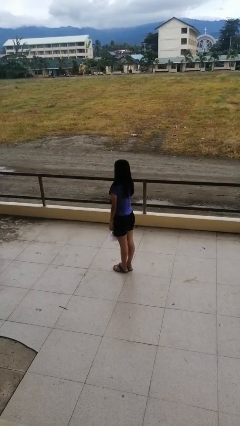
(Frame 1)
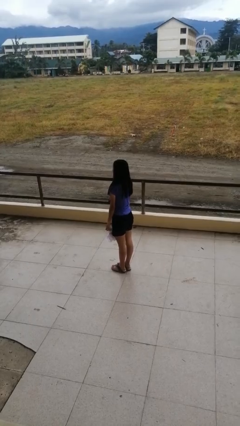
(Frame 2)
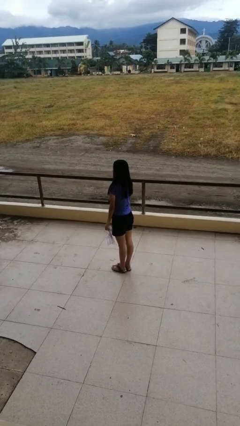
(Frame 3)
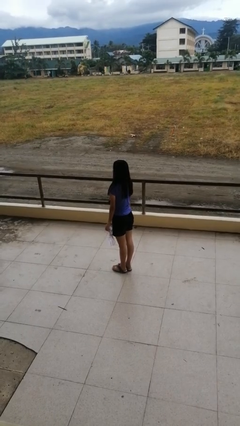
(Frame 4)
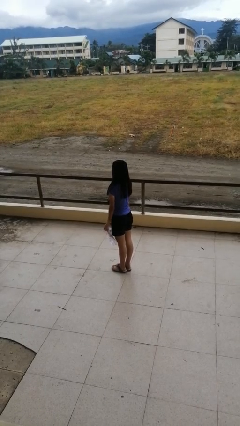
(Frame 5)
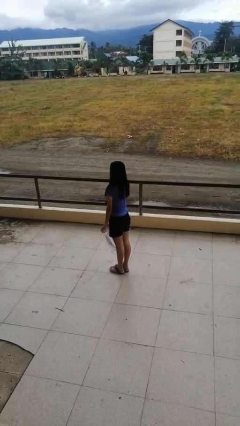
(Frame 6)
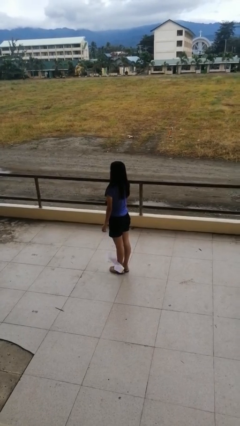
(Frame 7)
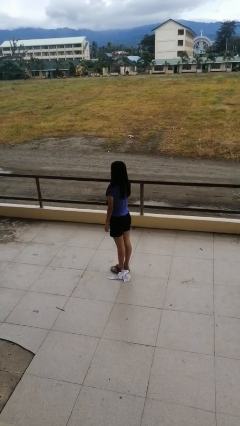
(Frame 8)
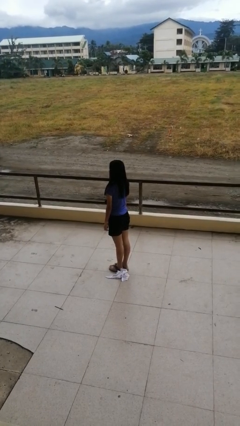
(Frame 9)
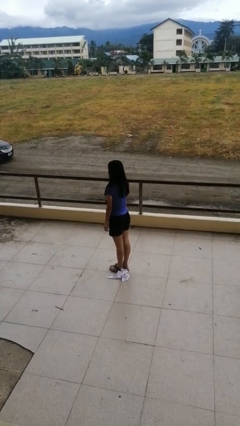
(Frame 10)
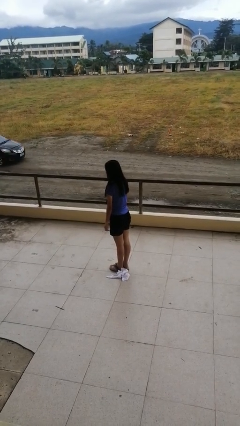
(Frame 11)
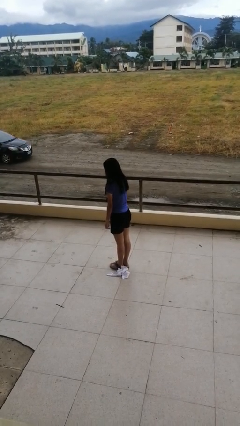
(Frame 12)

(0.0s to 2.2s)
person drops object

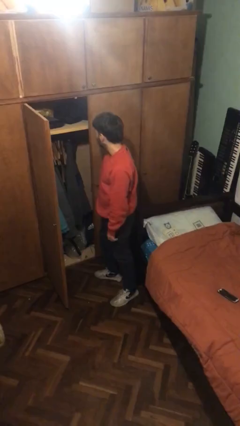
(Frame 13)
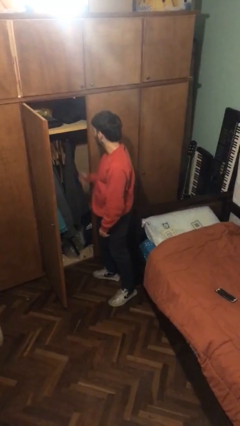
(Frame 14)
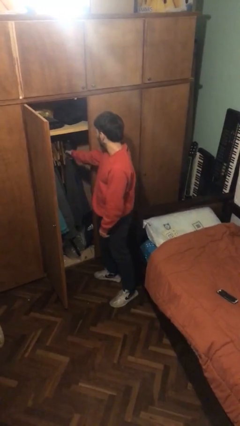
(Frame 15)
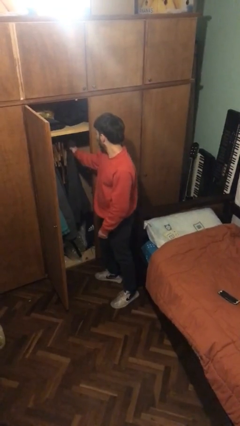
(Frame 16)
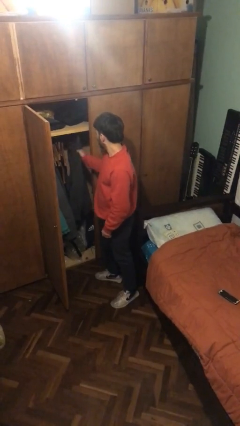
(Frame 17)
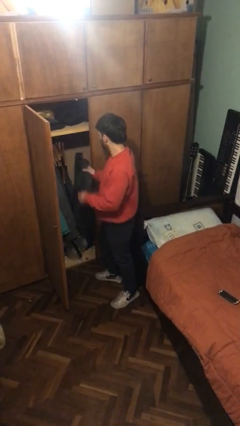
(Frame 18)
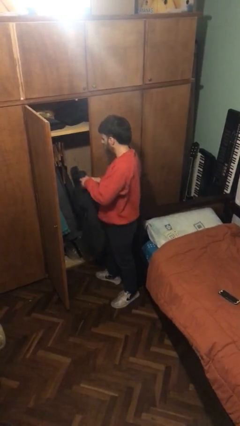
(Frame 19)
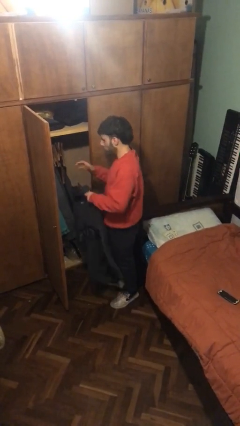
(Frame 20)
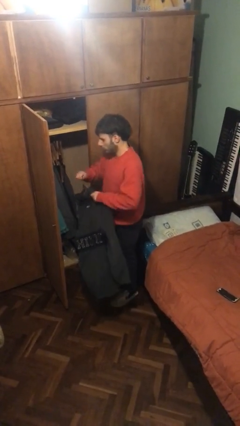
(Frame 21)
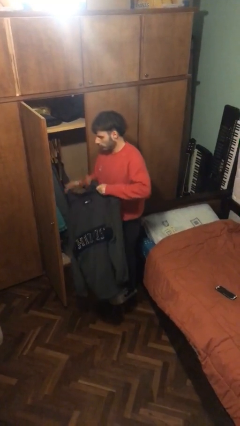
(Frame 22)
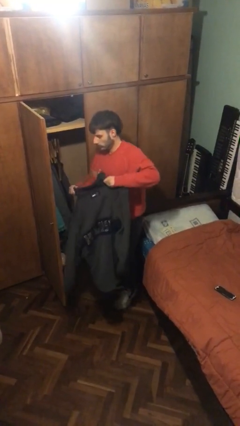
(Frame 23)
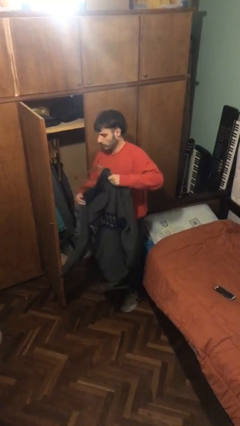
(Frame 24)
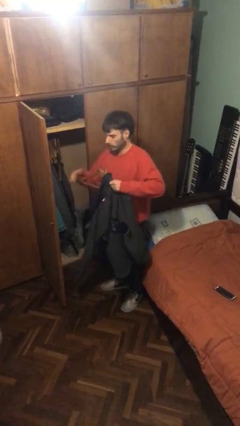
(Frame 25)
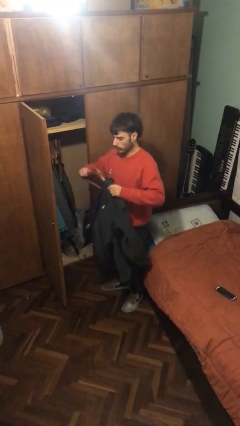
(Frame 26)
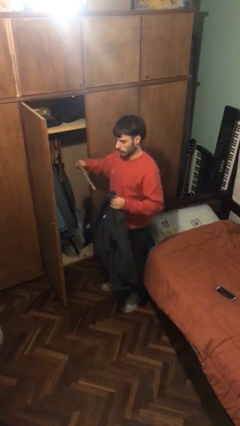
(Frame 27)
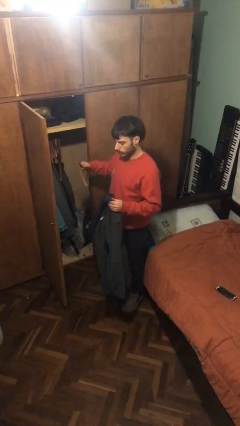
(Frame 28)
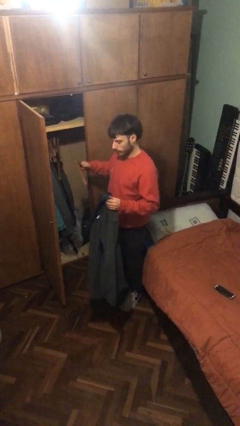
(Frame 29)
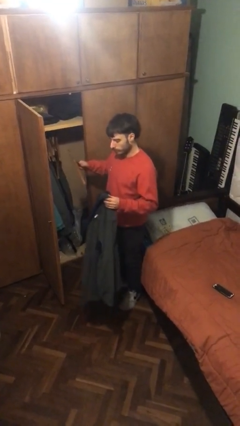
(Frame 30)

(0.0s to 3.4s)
person takes clothes from closet

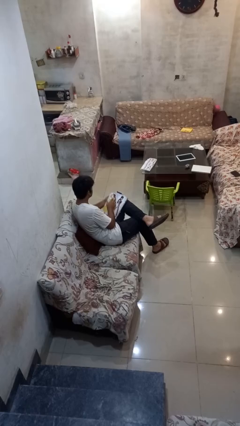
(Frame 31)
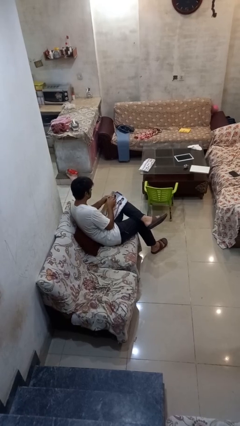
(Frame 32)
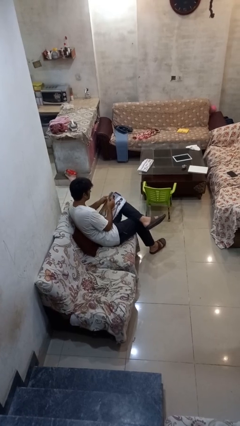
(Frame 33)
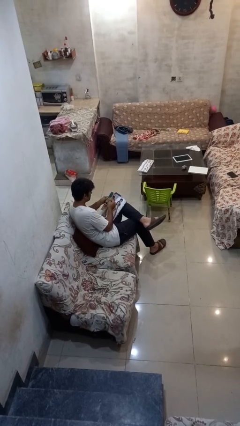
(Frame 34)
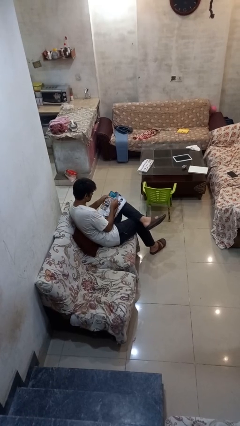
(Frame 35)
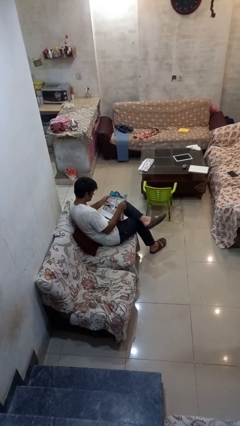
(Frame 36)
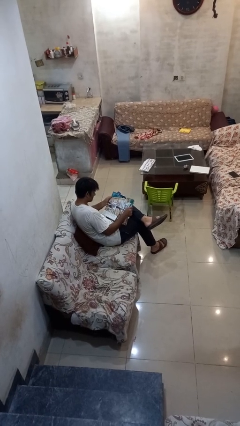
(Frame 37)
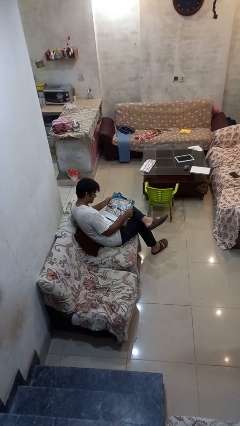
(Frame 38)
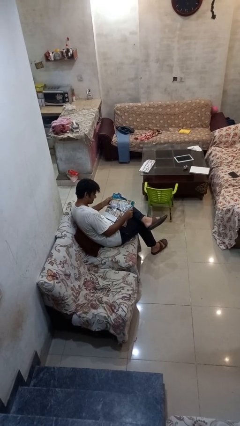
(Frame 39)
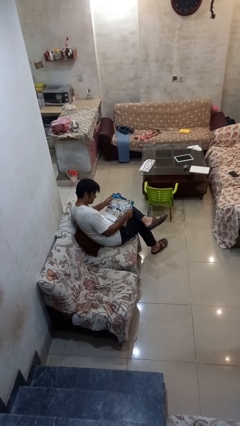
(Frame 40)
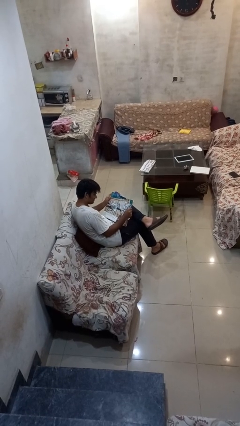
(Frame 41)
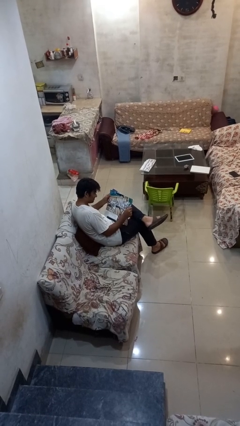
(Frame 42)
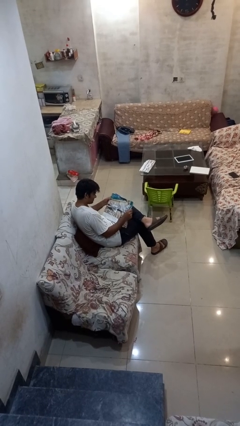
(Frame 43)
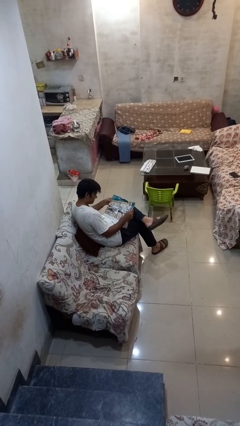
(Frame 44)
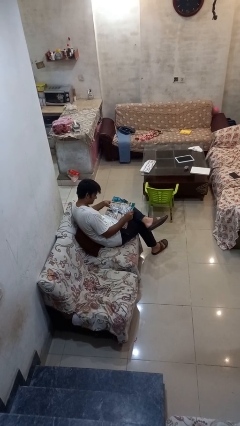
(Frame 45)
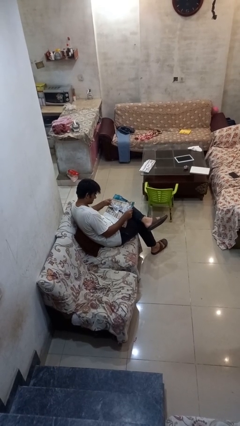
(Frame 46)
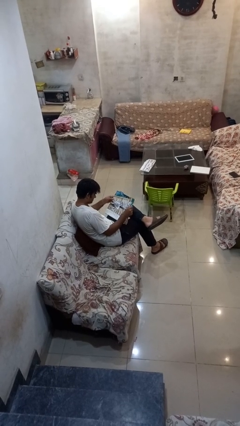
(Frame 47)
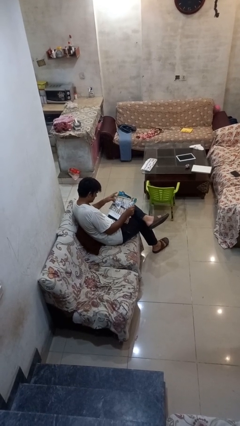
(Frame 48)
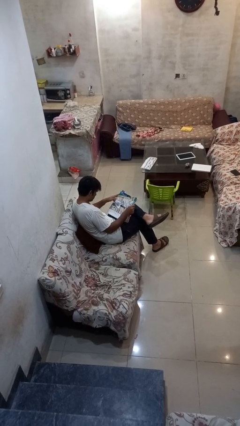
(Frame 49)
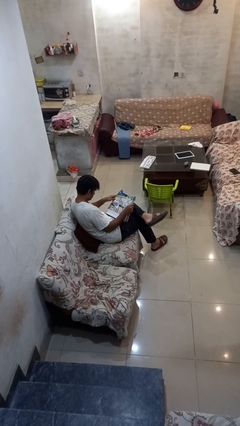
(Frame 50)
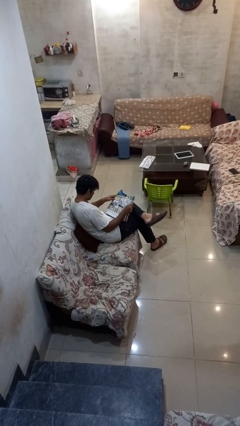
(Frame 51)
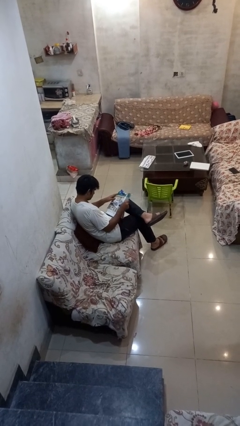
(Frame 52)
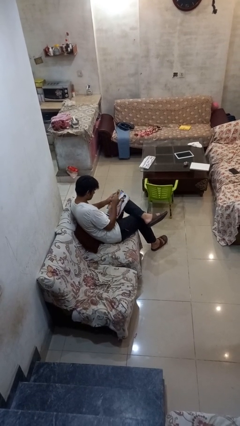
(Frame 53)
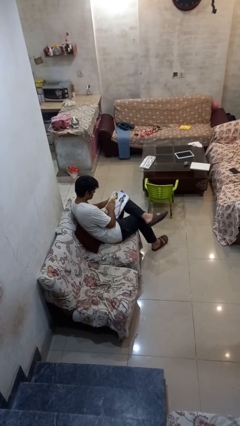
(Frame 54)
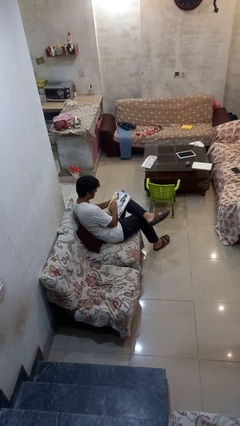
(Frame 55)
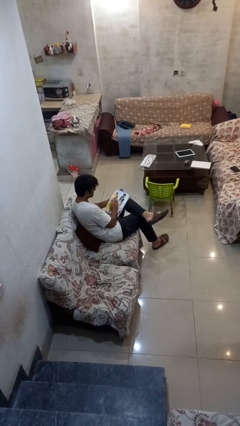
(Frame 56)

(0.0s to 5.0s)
person reads magazine

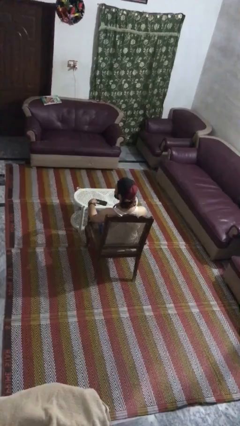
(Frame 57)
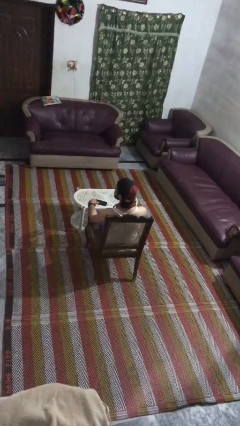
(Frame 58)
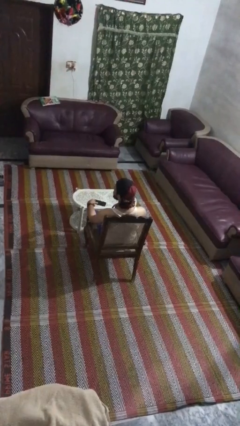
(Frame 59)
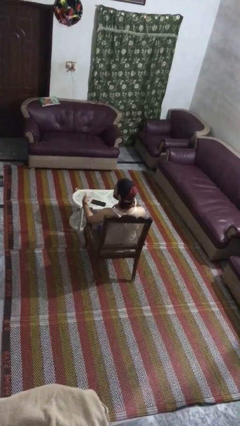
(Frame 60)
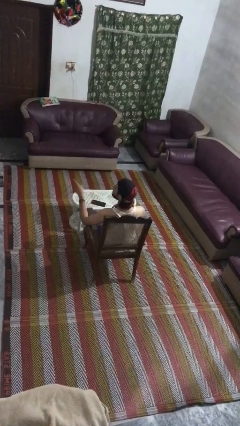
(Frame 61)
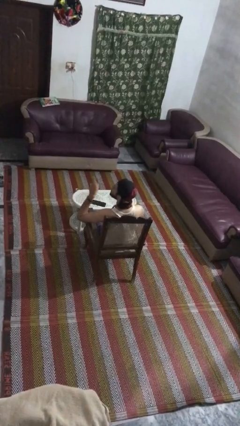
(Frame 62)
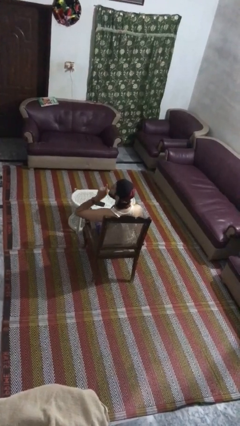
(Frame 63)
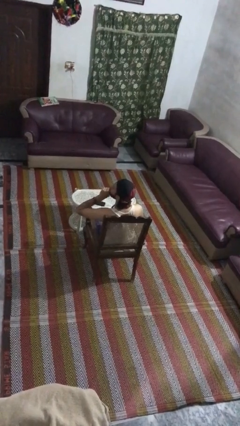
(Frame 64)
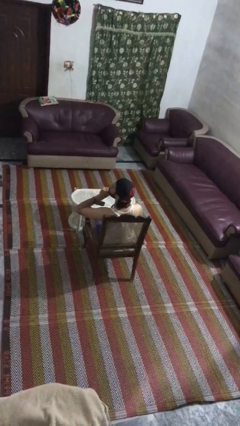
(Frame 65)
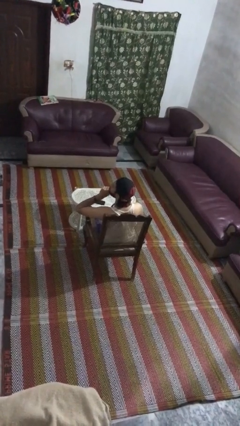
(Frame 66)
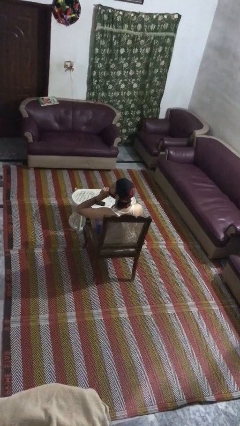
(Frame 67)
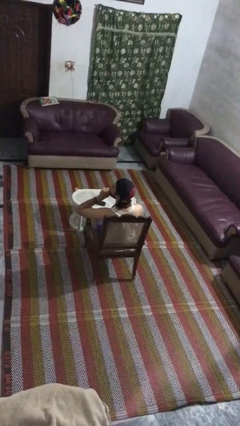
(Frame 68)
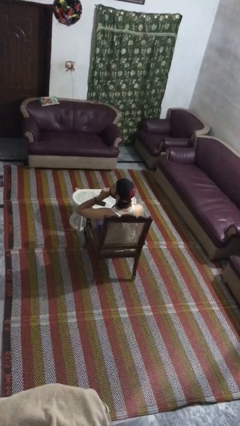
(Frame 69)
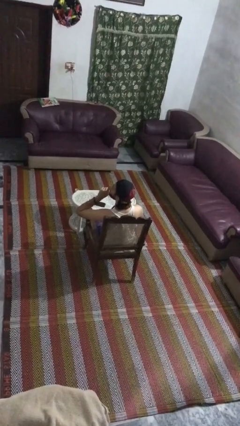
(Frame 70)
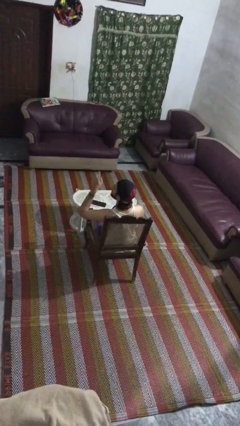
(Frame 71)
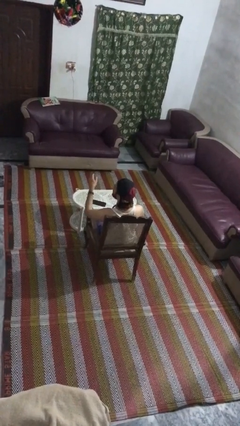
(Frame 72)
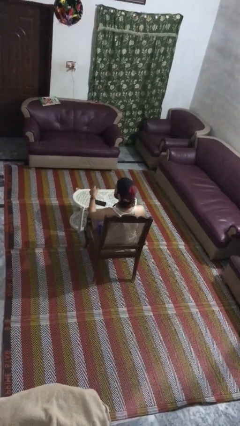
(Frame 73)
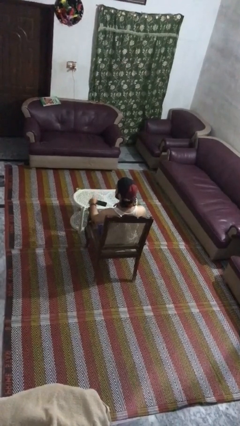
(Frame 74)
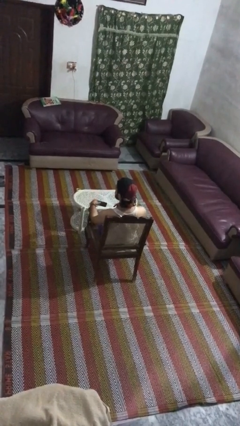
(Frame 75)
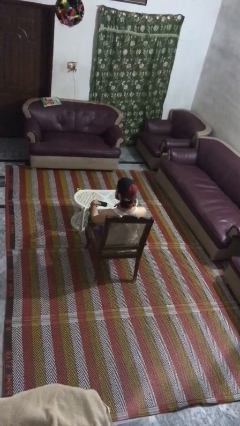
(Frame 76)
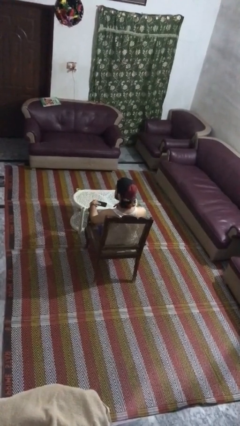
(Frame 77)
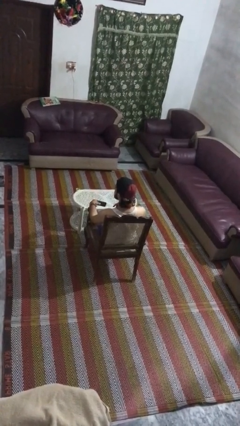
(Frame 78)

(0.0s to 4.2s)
person gestures be quiet

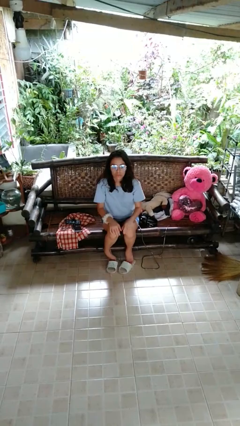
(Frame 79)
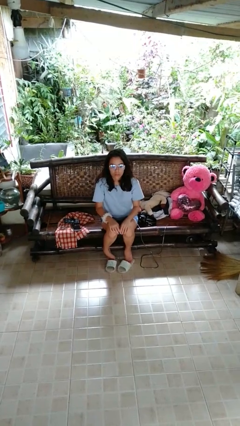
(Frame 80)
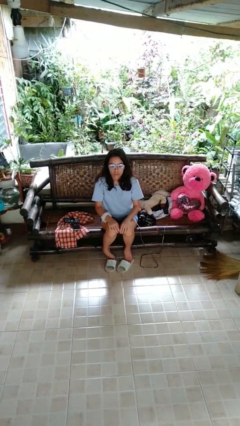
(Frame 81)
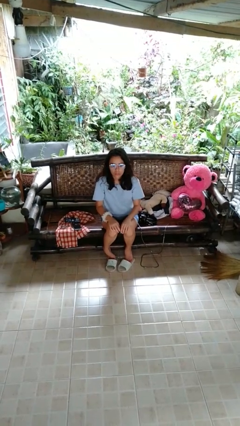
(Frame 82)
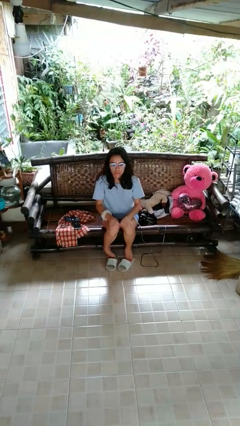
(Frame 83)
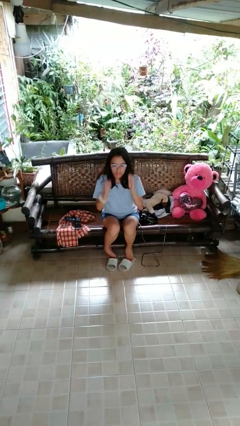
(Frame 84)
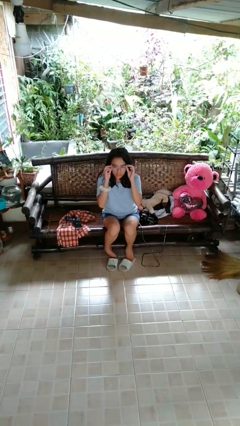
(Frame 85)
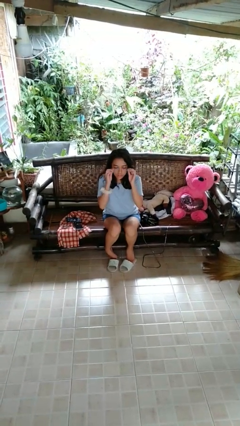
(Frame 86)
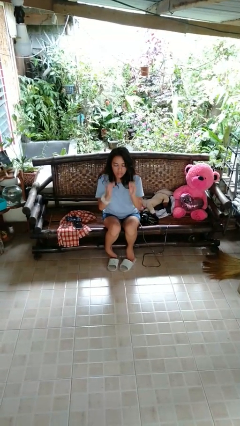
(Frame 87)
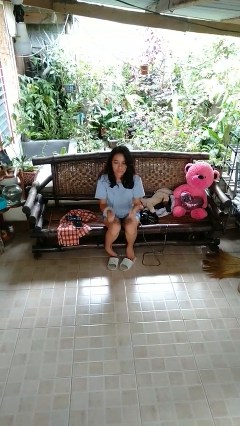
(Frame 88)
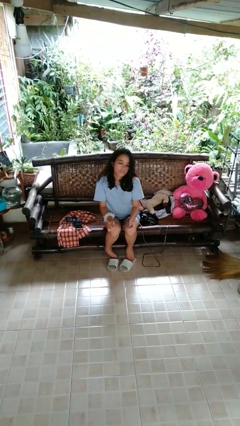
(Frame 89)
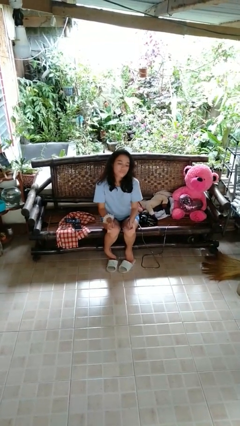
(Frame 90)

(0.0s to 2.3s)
person grabs person by forearm

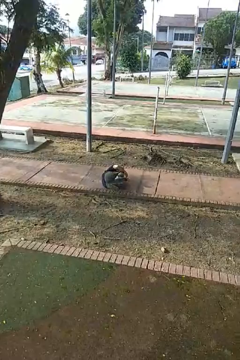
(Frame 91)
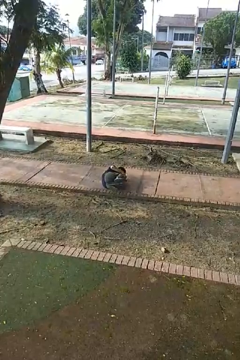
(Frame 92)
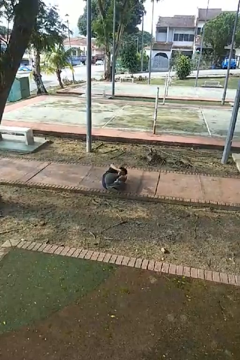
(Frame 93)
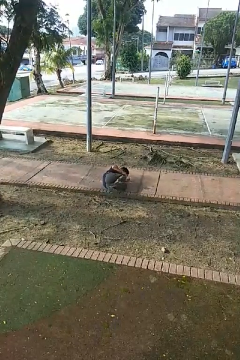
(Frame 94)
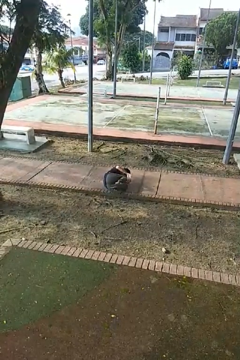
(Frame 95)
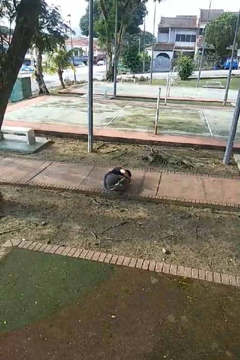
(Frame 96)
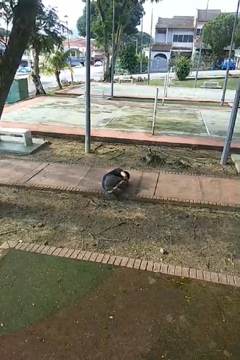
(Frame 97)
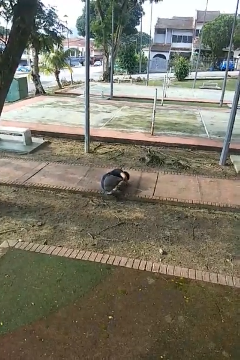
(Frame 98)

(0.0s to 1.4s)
person lies down on floor
